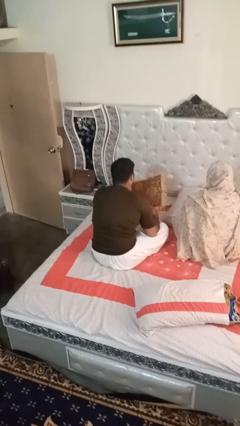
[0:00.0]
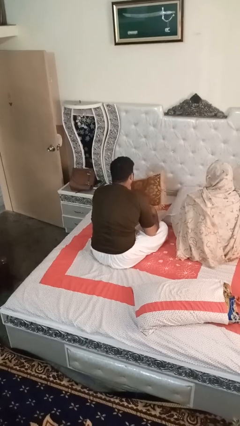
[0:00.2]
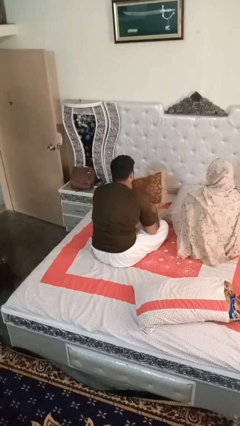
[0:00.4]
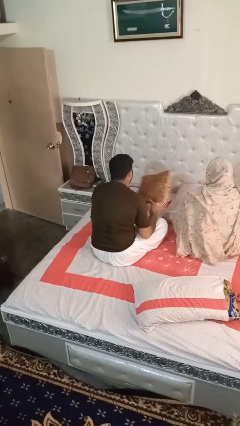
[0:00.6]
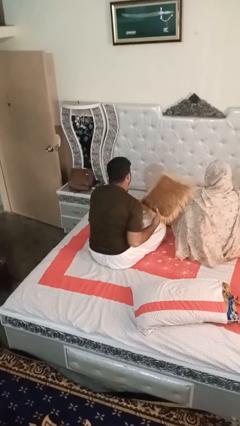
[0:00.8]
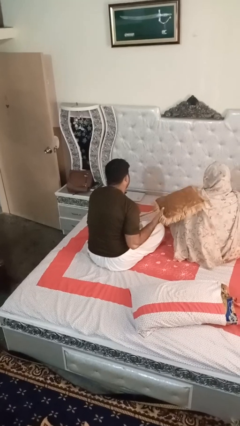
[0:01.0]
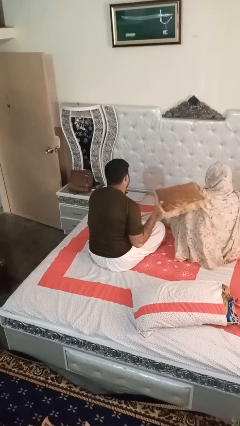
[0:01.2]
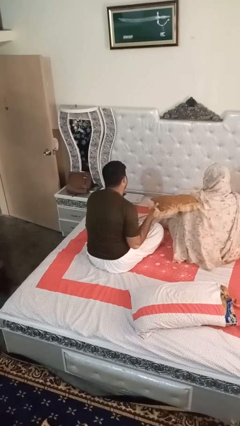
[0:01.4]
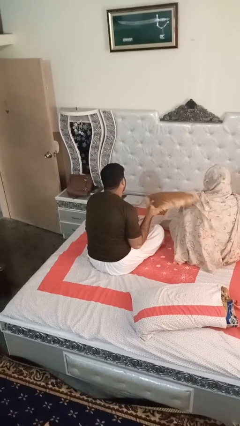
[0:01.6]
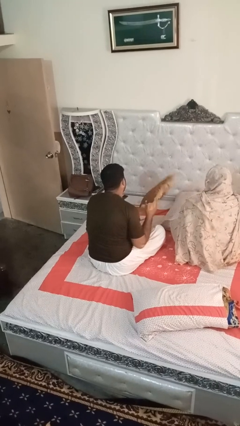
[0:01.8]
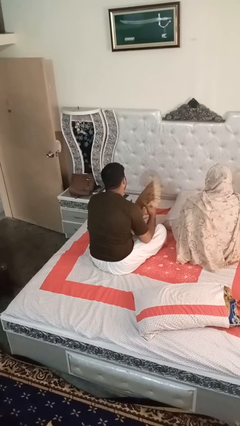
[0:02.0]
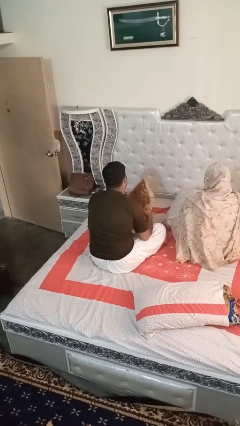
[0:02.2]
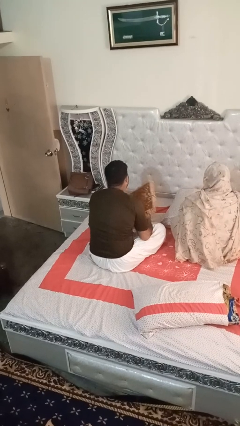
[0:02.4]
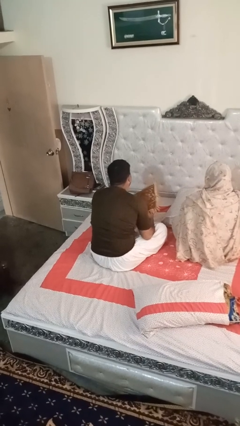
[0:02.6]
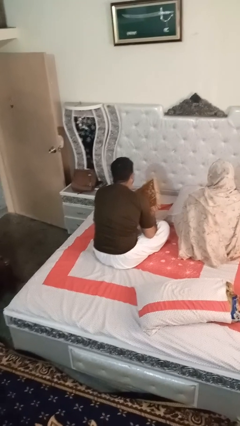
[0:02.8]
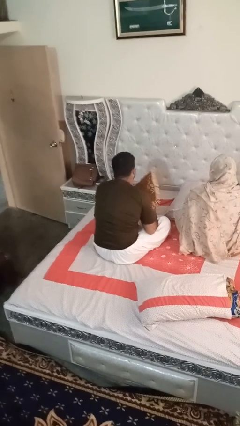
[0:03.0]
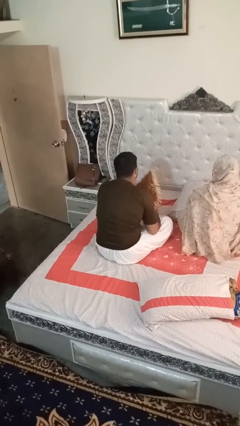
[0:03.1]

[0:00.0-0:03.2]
person hits person with pillow

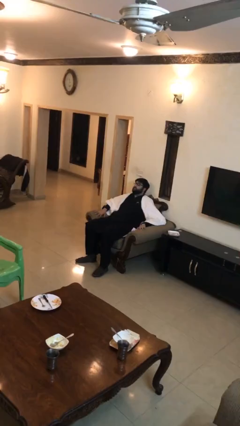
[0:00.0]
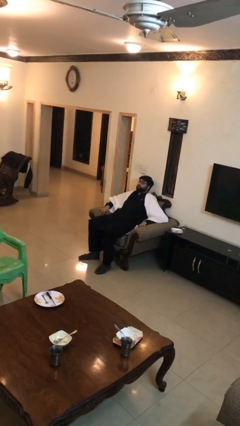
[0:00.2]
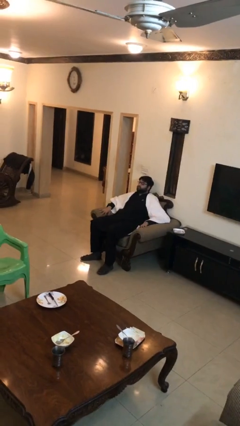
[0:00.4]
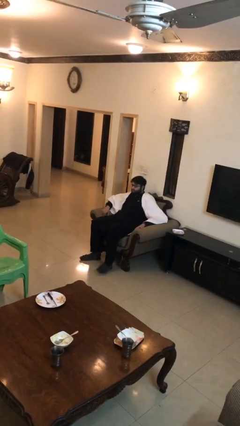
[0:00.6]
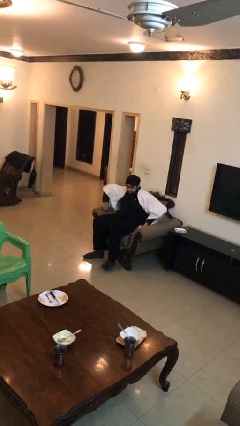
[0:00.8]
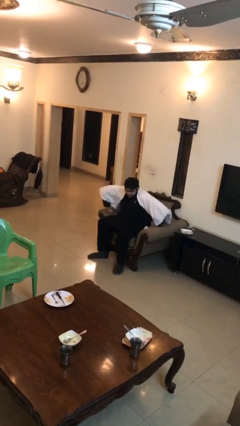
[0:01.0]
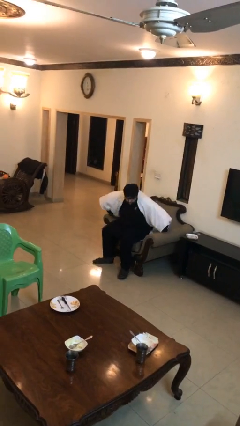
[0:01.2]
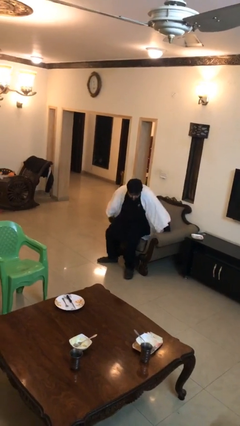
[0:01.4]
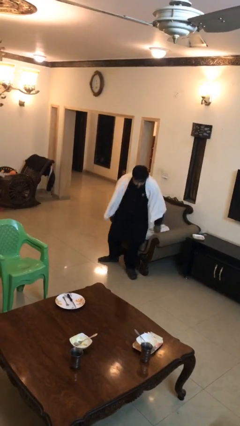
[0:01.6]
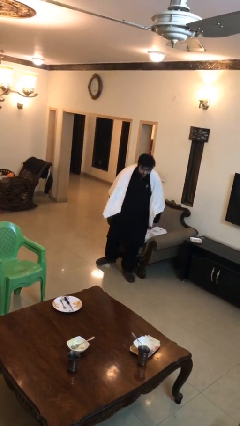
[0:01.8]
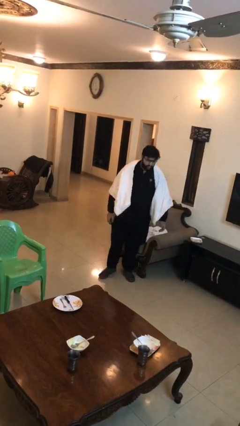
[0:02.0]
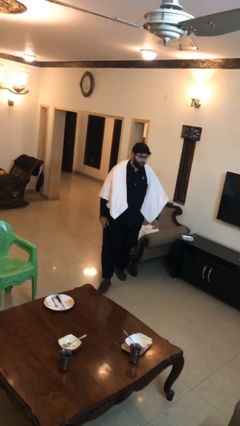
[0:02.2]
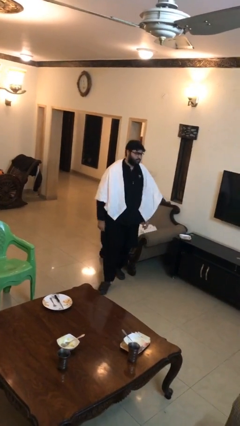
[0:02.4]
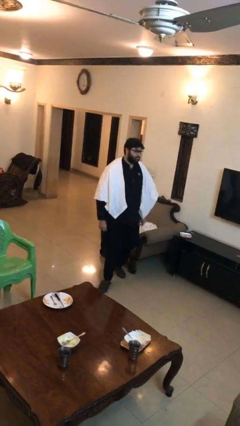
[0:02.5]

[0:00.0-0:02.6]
person stands up

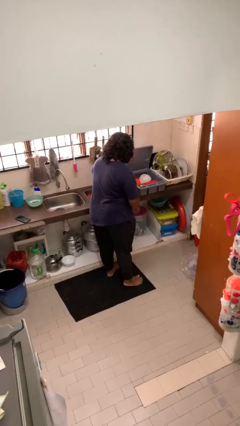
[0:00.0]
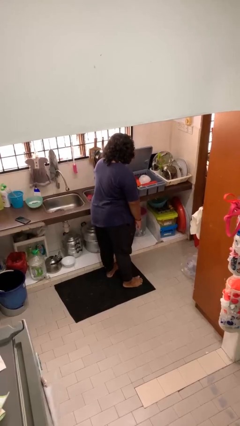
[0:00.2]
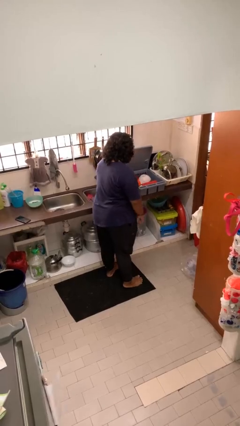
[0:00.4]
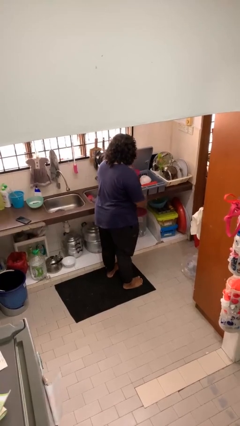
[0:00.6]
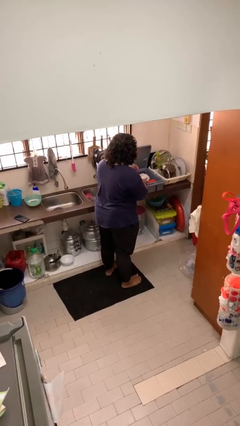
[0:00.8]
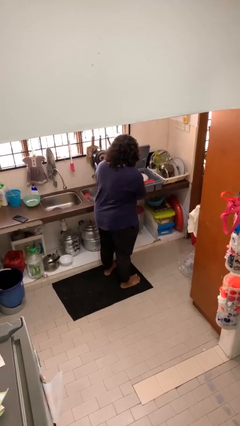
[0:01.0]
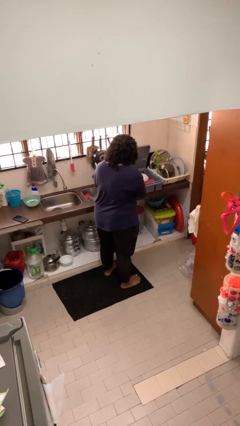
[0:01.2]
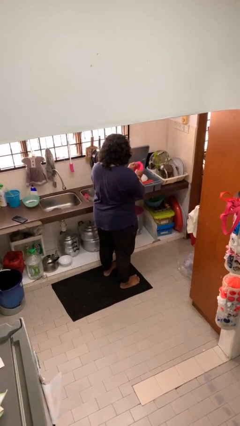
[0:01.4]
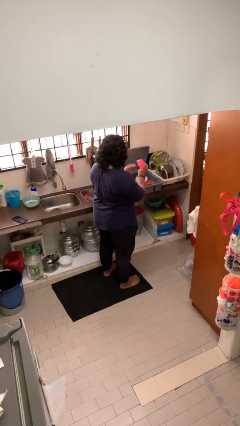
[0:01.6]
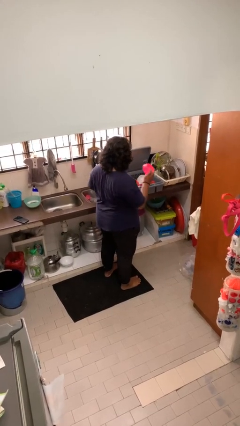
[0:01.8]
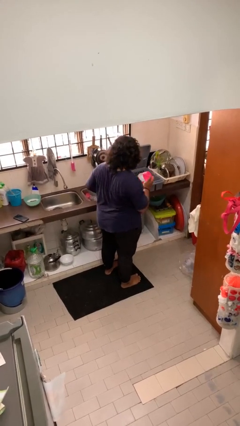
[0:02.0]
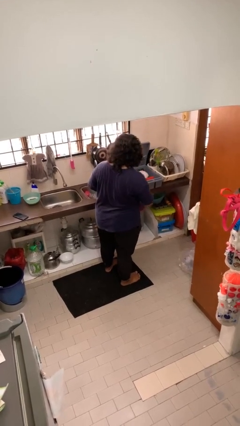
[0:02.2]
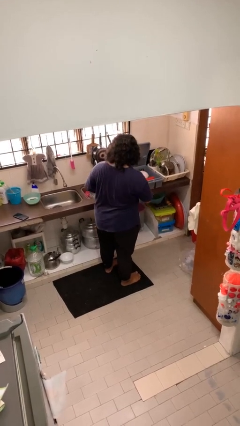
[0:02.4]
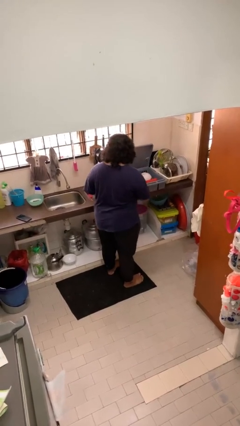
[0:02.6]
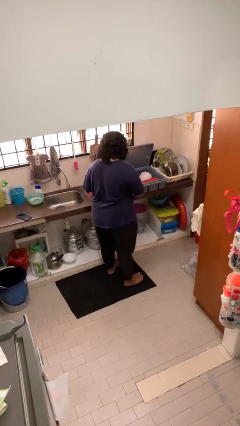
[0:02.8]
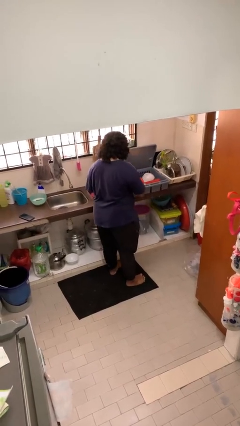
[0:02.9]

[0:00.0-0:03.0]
person unloads dishwasher

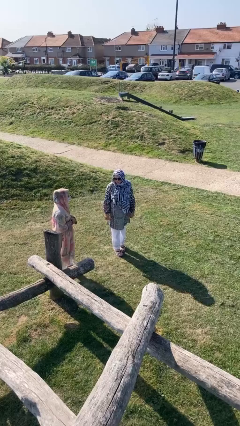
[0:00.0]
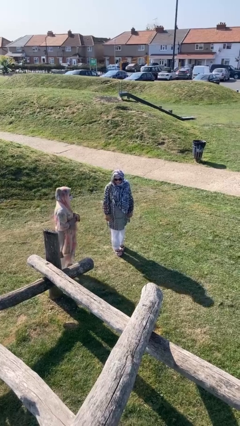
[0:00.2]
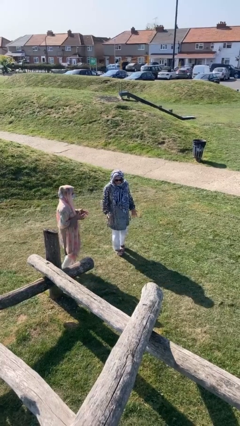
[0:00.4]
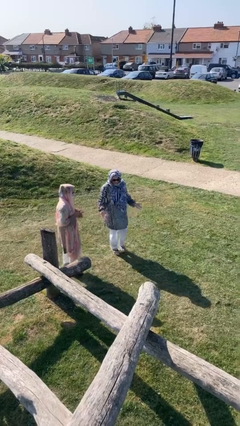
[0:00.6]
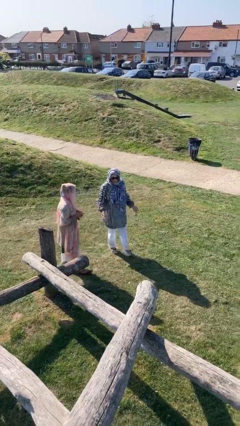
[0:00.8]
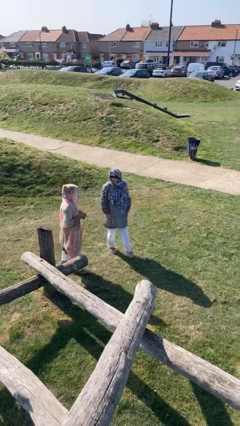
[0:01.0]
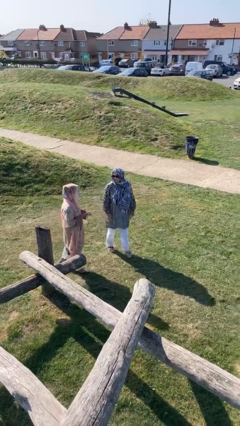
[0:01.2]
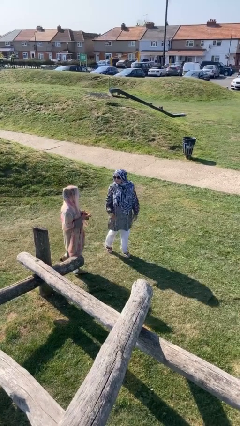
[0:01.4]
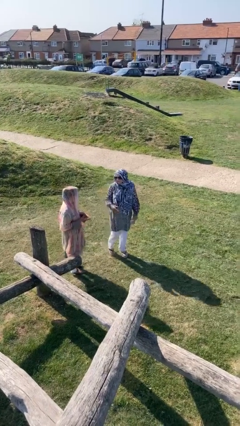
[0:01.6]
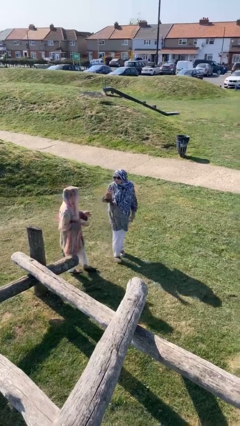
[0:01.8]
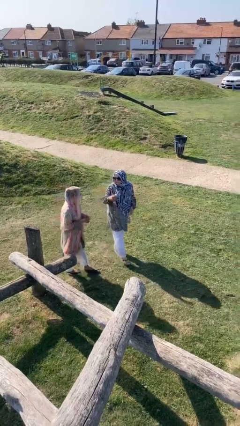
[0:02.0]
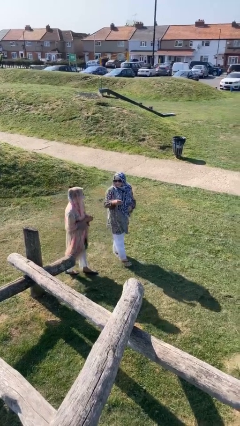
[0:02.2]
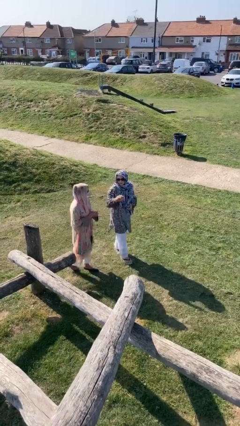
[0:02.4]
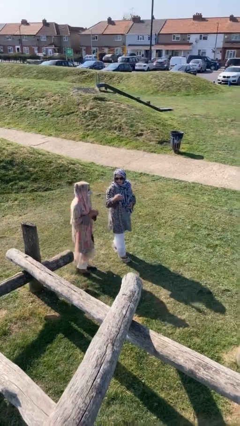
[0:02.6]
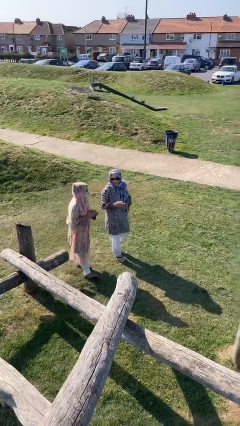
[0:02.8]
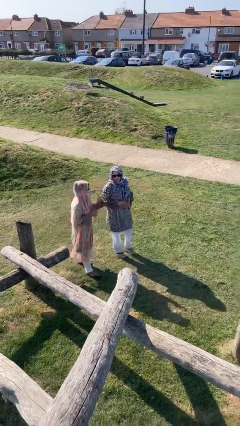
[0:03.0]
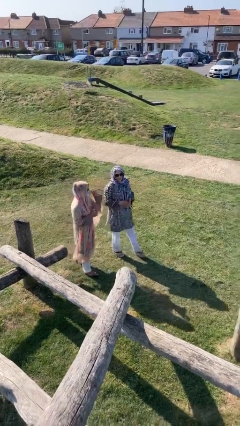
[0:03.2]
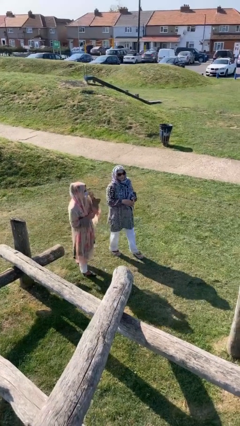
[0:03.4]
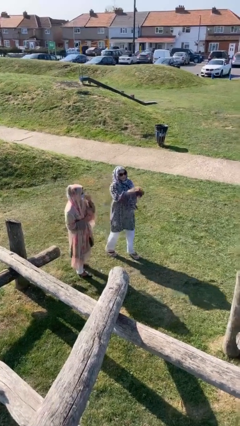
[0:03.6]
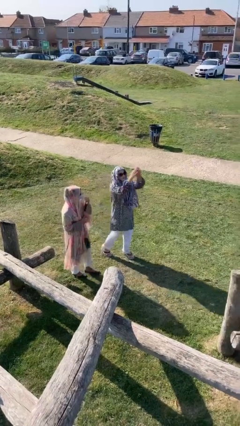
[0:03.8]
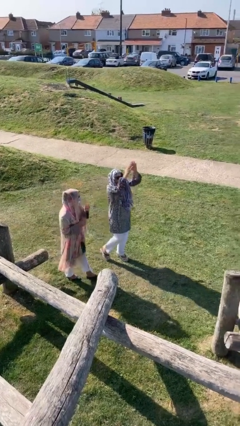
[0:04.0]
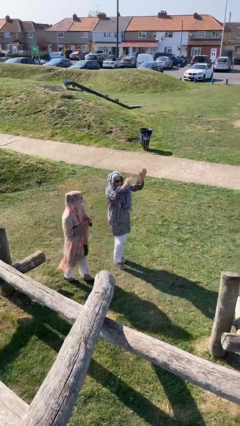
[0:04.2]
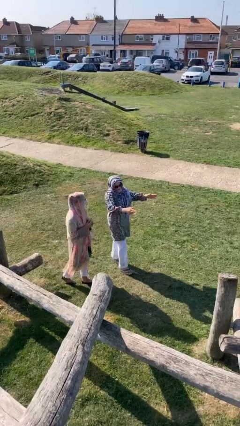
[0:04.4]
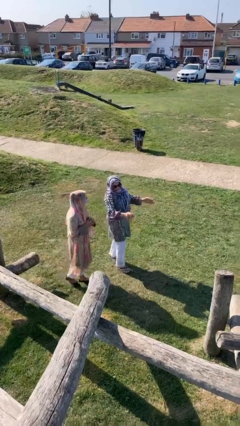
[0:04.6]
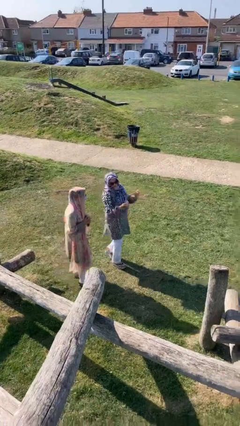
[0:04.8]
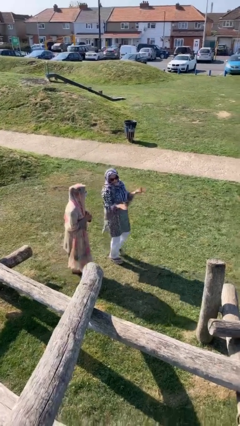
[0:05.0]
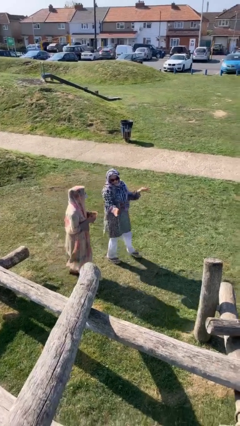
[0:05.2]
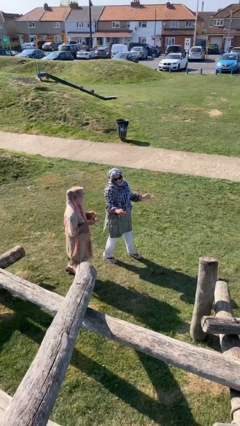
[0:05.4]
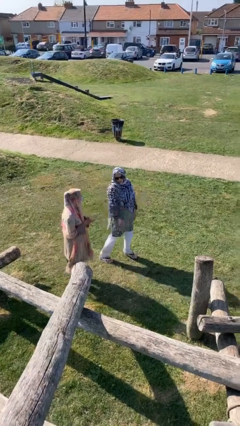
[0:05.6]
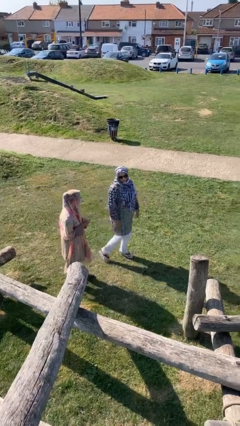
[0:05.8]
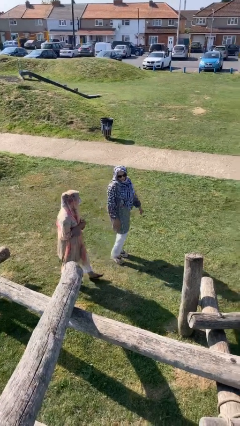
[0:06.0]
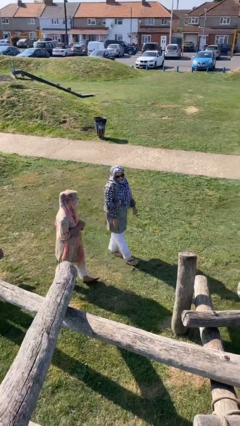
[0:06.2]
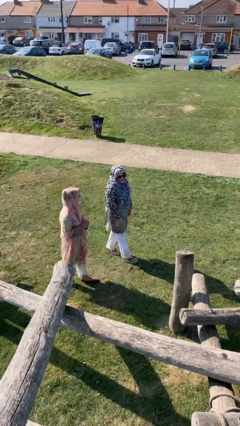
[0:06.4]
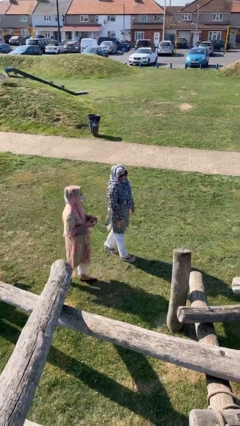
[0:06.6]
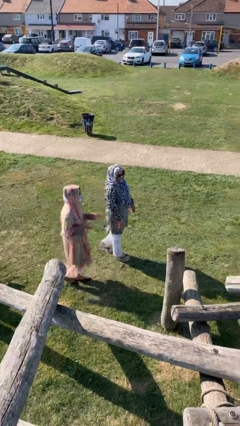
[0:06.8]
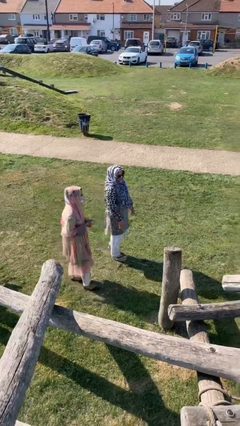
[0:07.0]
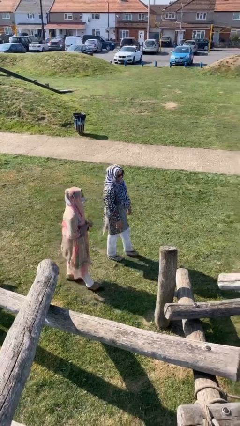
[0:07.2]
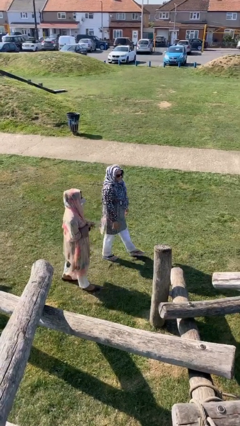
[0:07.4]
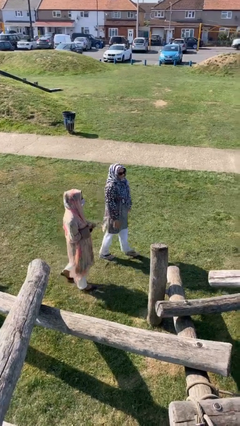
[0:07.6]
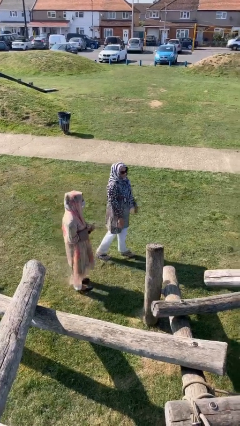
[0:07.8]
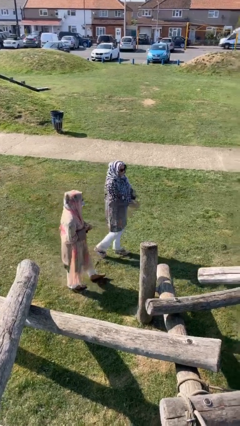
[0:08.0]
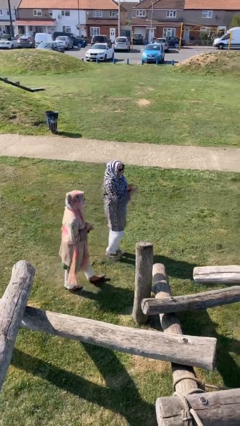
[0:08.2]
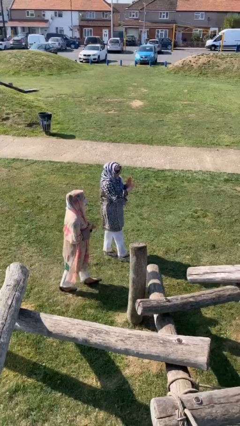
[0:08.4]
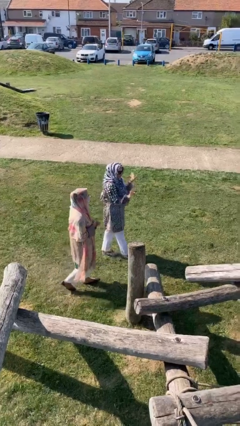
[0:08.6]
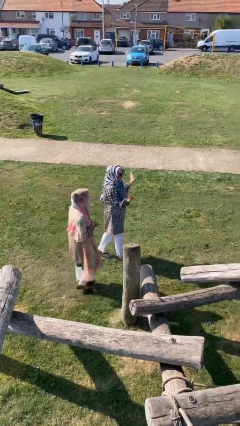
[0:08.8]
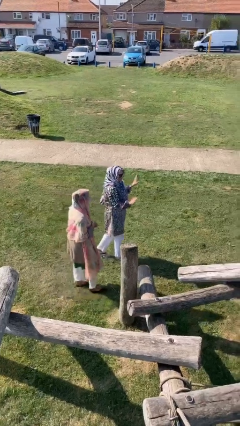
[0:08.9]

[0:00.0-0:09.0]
person talks to person
